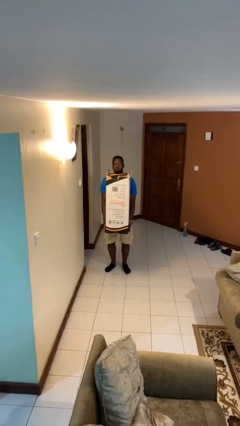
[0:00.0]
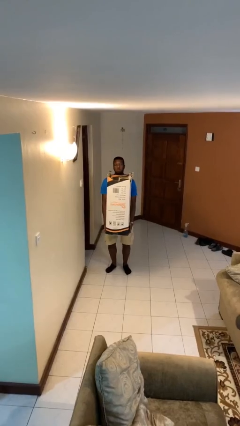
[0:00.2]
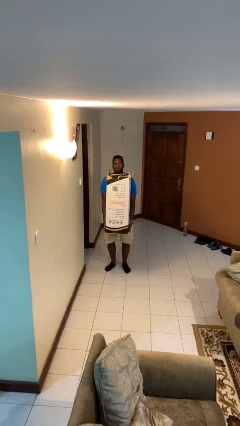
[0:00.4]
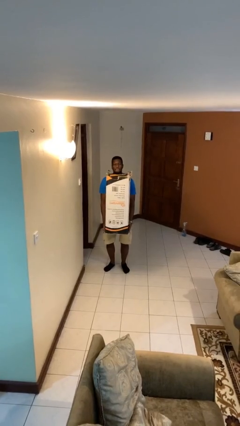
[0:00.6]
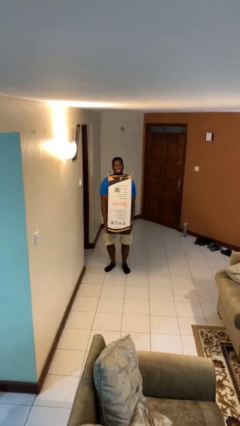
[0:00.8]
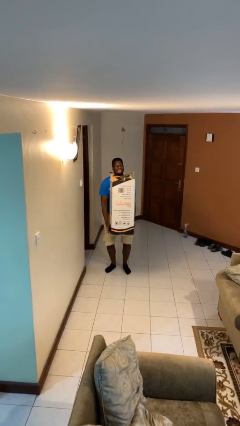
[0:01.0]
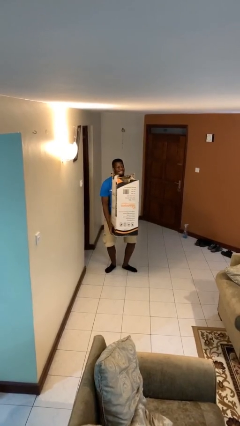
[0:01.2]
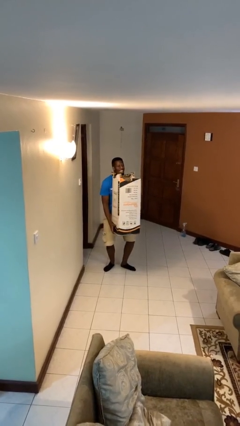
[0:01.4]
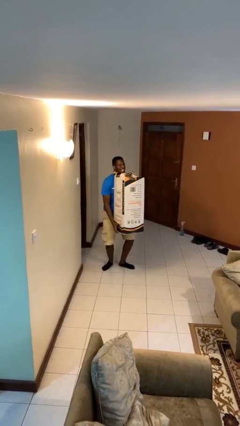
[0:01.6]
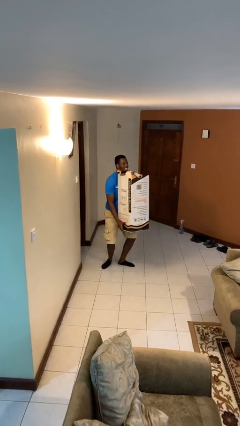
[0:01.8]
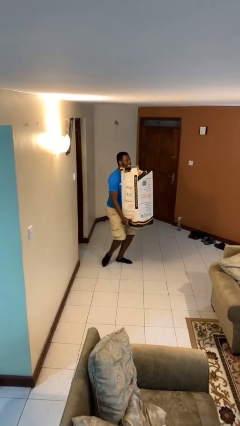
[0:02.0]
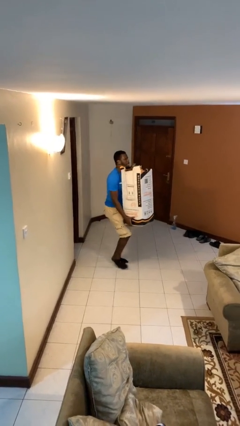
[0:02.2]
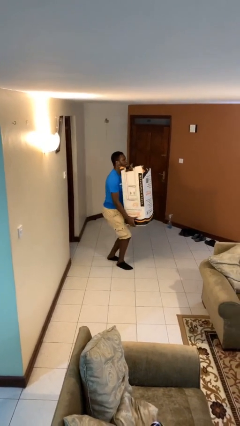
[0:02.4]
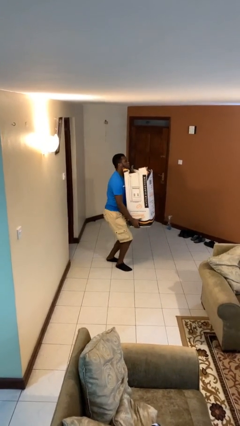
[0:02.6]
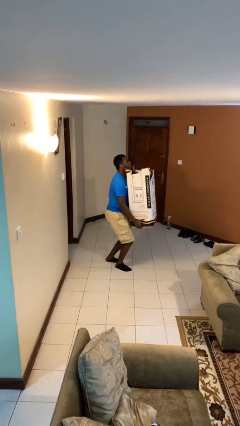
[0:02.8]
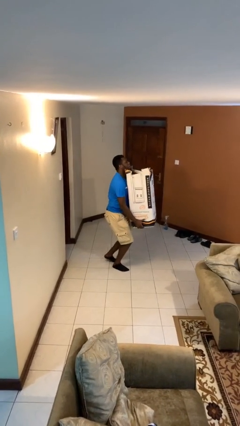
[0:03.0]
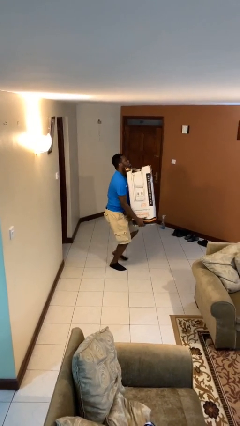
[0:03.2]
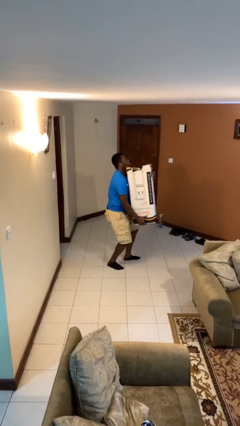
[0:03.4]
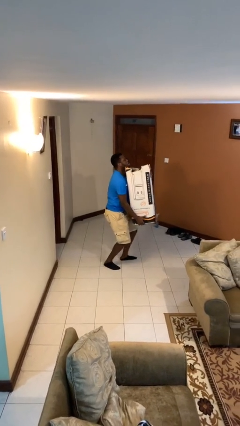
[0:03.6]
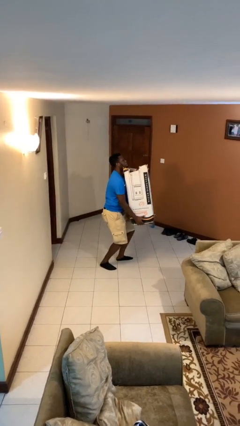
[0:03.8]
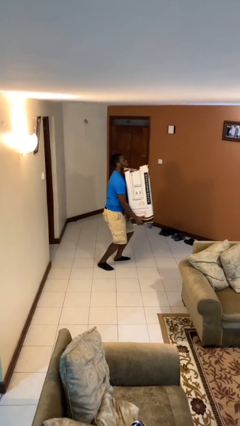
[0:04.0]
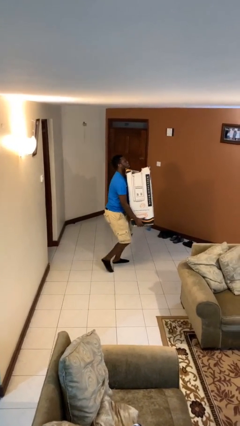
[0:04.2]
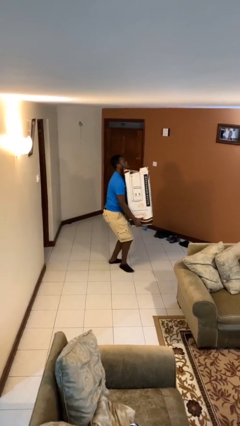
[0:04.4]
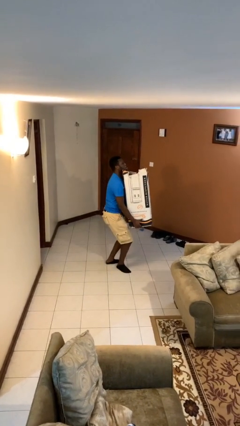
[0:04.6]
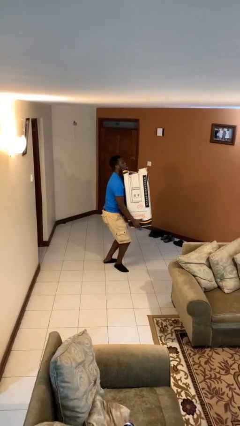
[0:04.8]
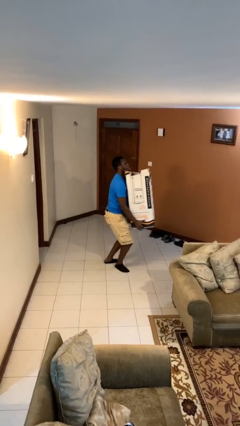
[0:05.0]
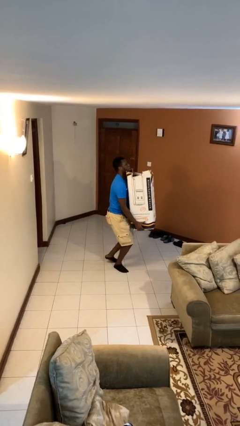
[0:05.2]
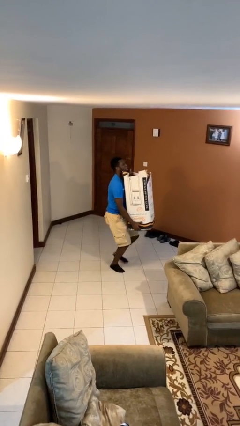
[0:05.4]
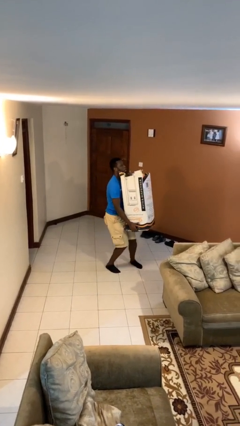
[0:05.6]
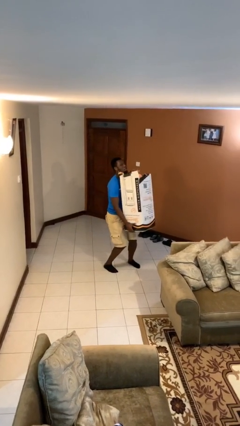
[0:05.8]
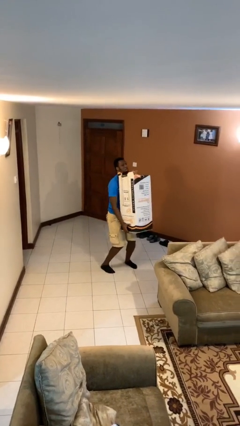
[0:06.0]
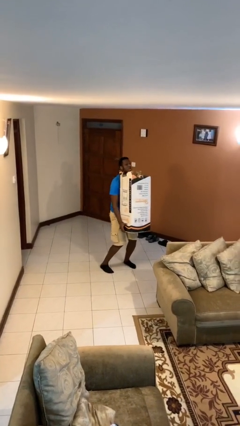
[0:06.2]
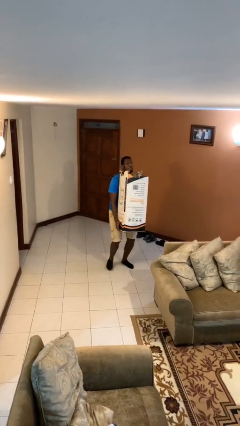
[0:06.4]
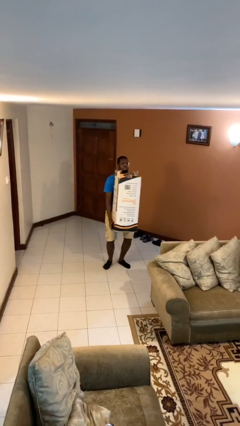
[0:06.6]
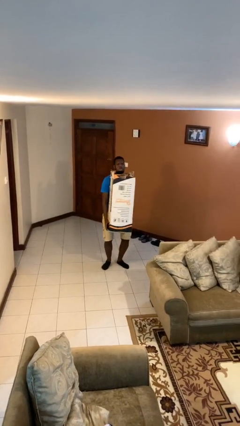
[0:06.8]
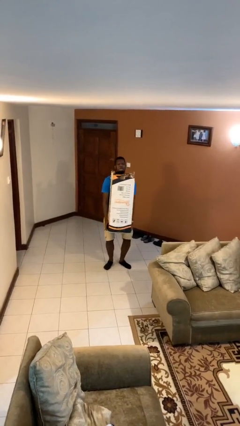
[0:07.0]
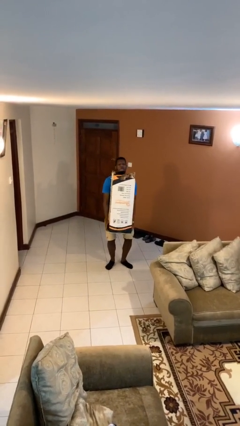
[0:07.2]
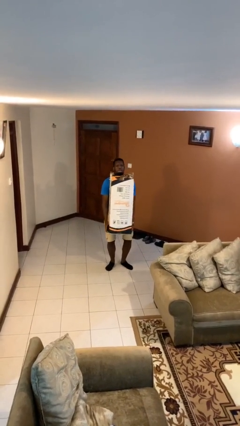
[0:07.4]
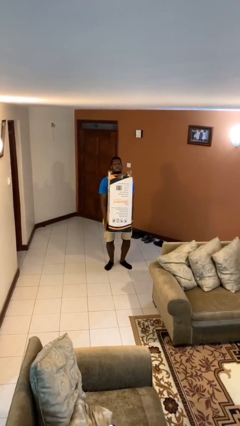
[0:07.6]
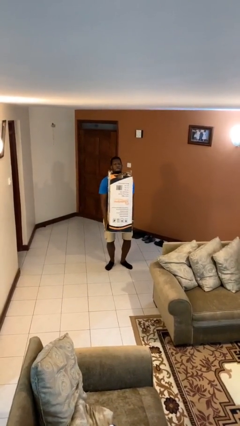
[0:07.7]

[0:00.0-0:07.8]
person carries heavy object

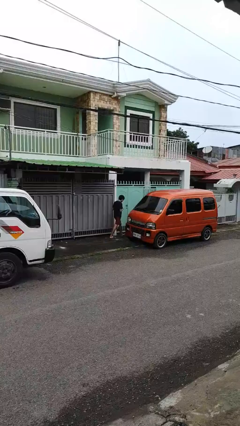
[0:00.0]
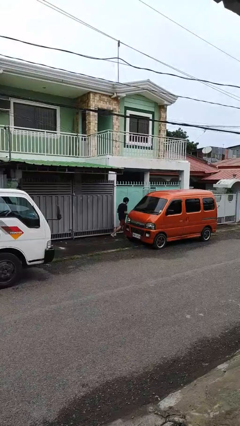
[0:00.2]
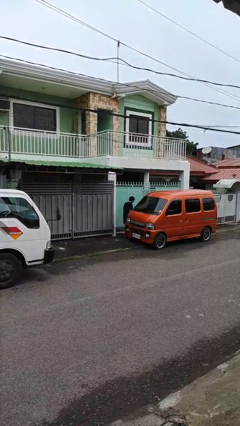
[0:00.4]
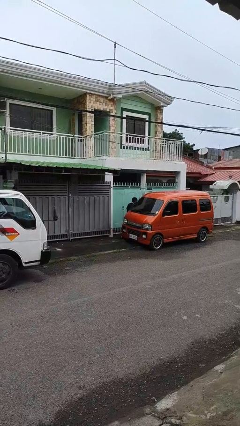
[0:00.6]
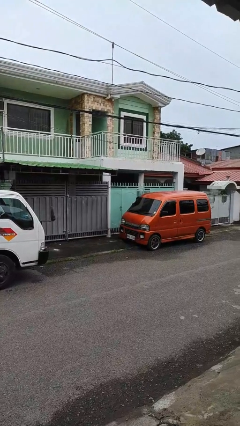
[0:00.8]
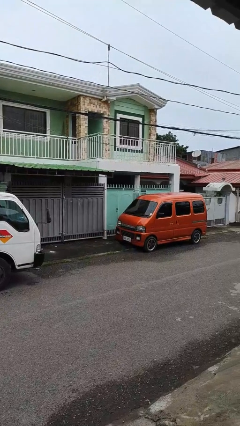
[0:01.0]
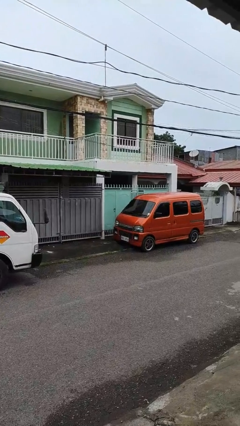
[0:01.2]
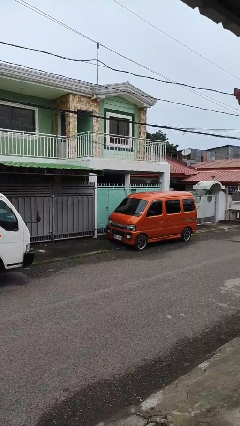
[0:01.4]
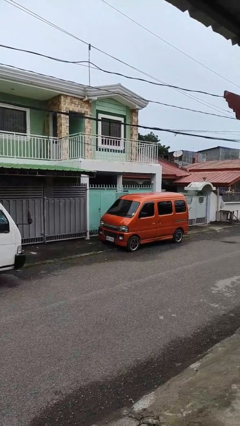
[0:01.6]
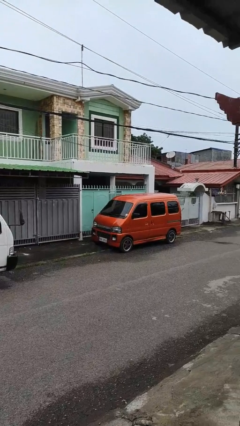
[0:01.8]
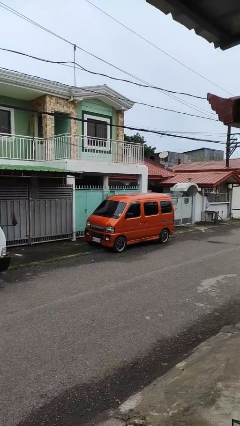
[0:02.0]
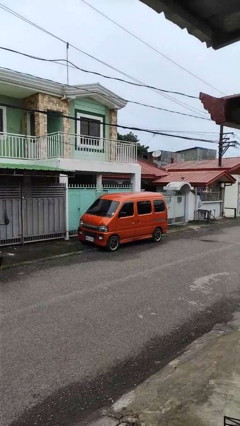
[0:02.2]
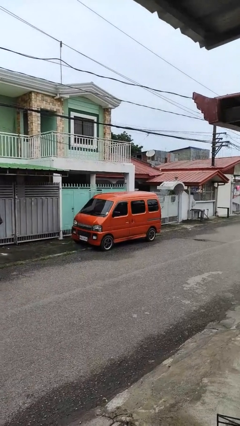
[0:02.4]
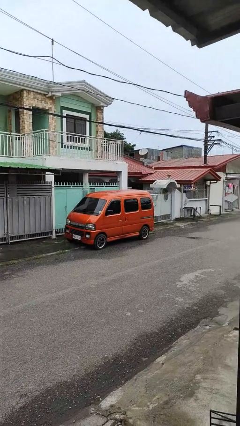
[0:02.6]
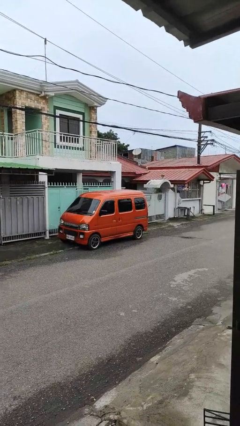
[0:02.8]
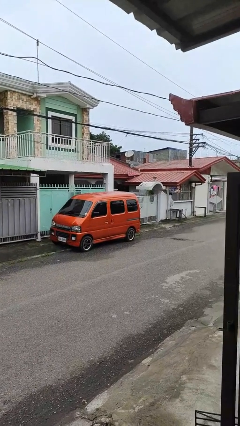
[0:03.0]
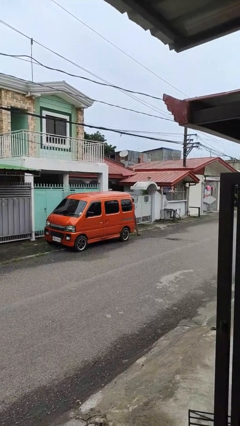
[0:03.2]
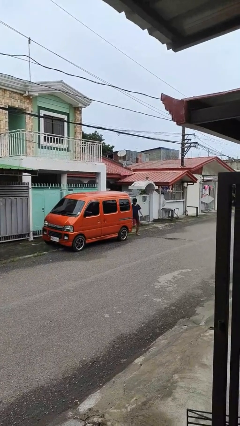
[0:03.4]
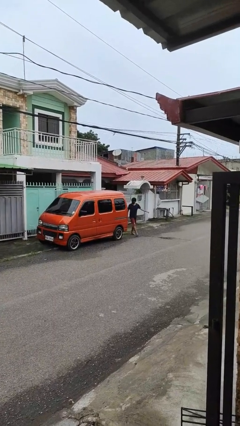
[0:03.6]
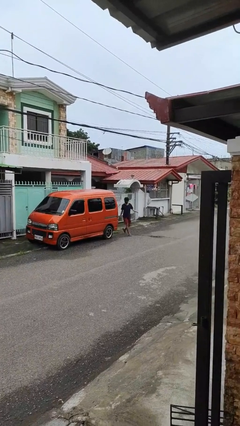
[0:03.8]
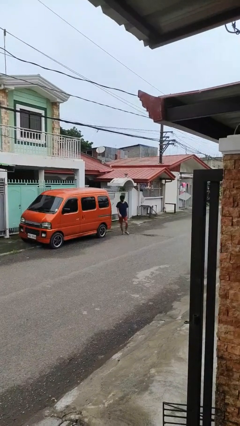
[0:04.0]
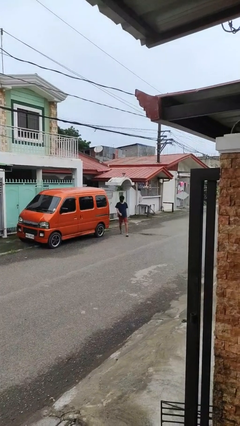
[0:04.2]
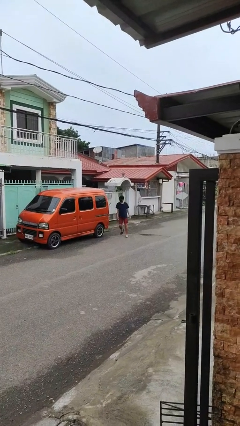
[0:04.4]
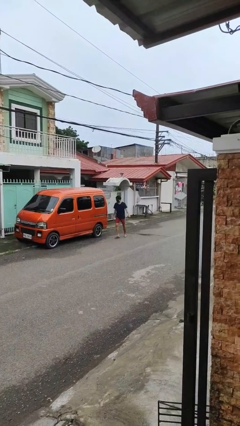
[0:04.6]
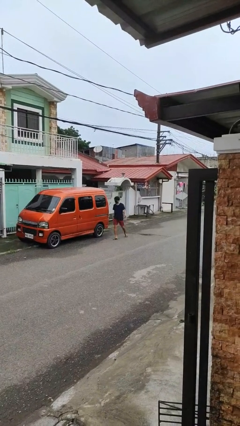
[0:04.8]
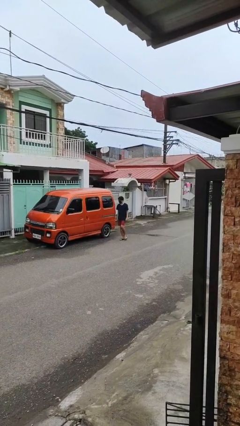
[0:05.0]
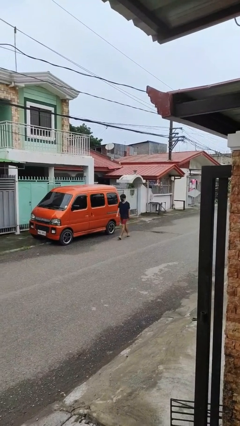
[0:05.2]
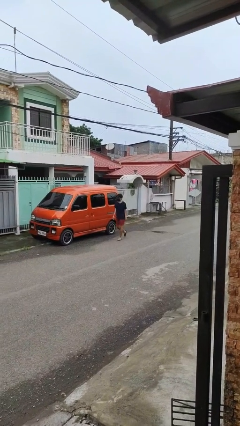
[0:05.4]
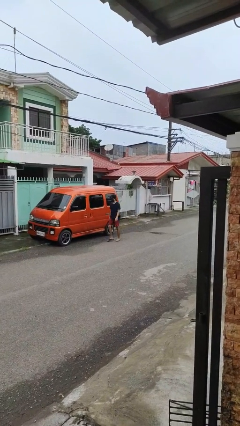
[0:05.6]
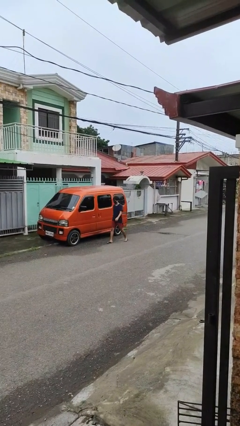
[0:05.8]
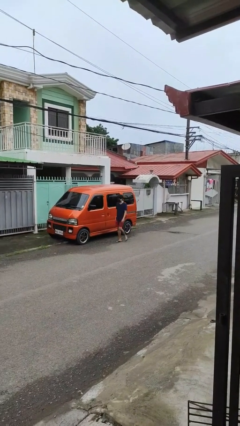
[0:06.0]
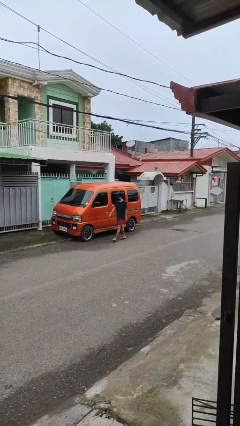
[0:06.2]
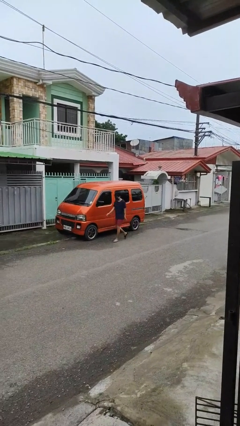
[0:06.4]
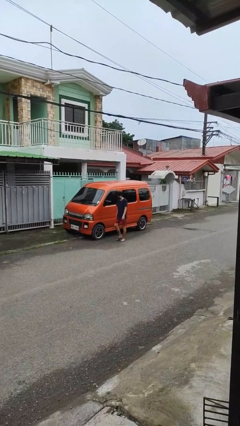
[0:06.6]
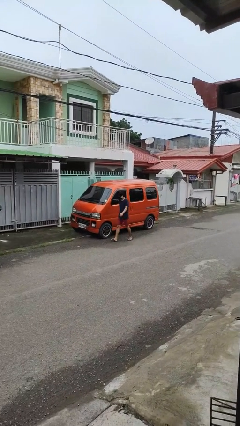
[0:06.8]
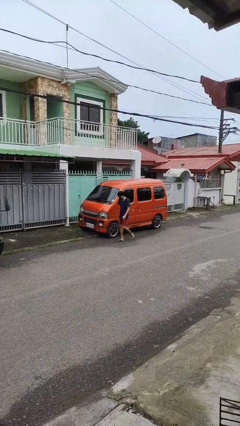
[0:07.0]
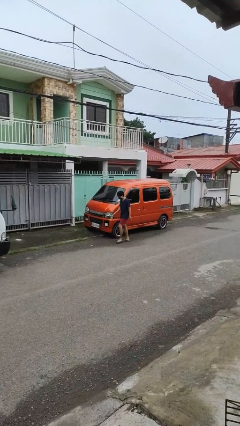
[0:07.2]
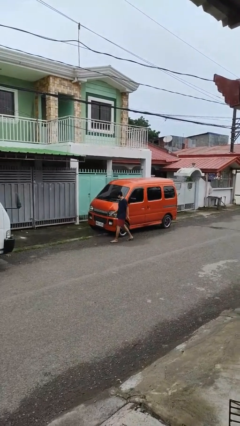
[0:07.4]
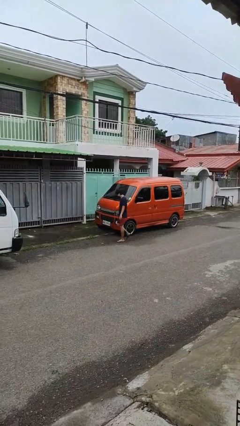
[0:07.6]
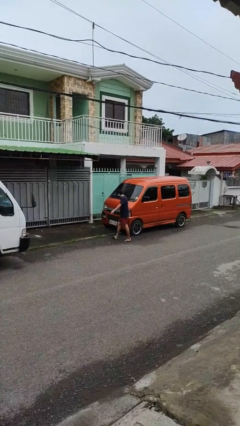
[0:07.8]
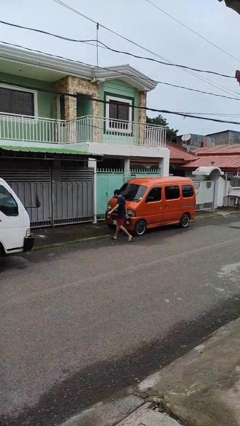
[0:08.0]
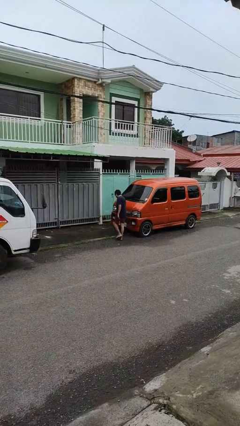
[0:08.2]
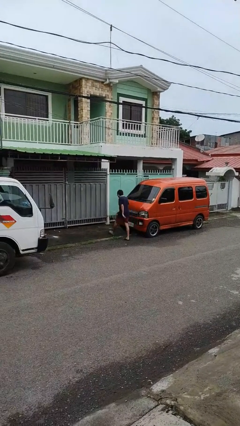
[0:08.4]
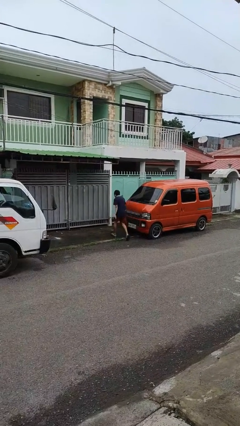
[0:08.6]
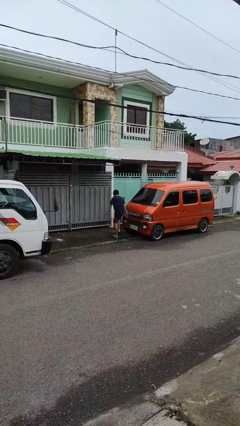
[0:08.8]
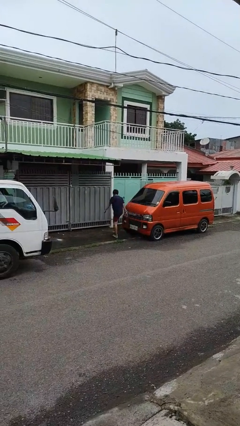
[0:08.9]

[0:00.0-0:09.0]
person walks around car

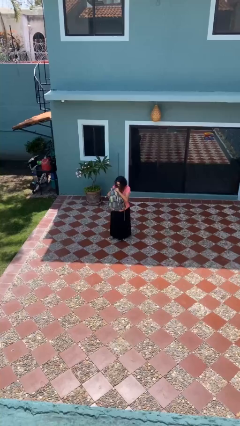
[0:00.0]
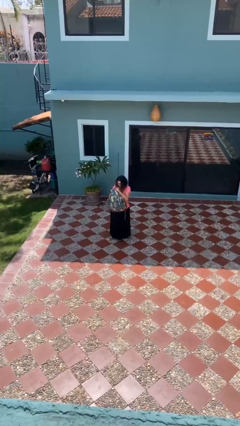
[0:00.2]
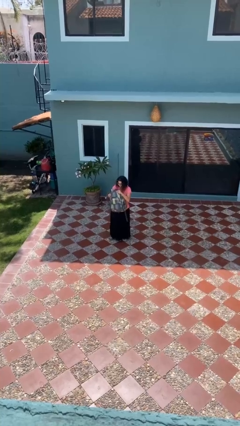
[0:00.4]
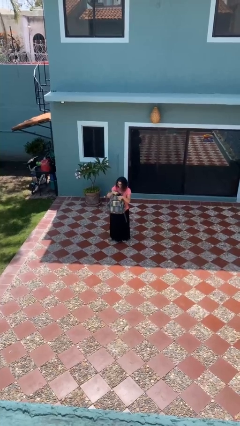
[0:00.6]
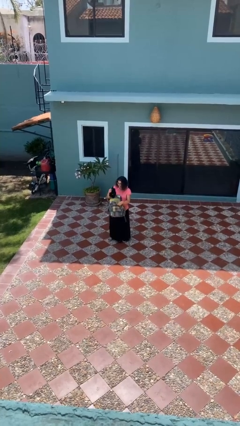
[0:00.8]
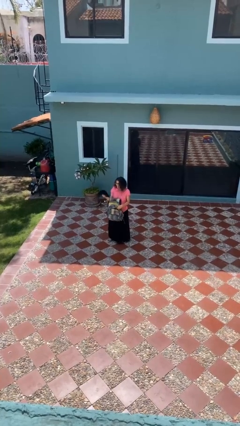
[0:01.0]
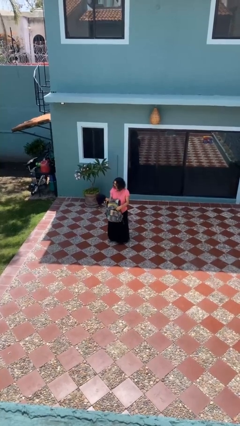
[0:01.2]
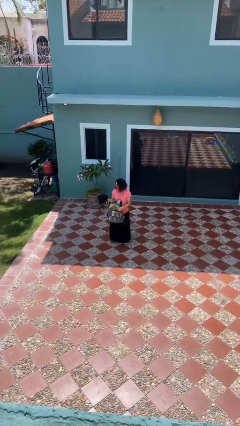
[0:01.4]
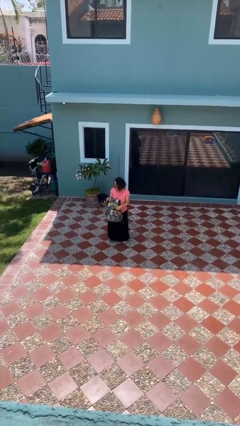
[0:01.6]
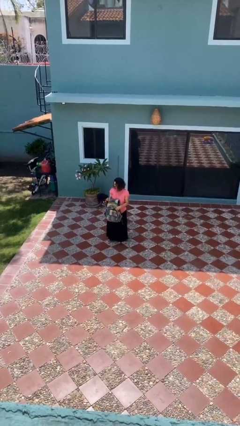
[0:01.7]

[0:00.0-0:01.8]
person takes object from backpack
